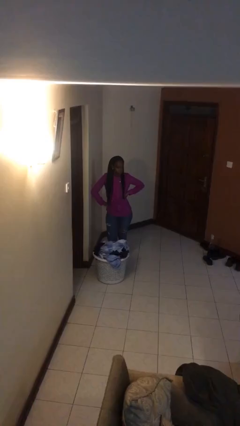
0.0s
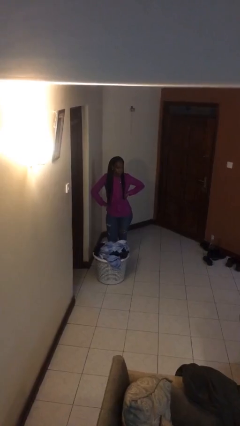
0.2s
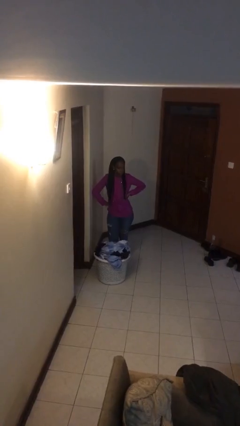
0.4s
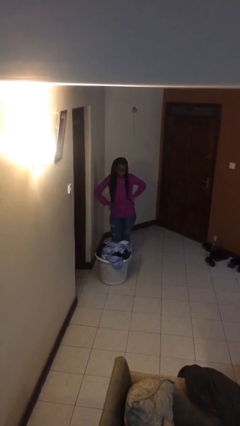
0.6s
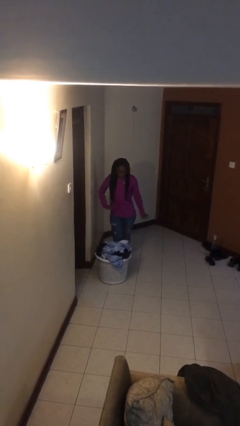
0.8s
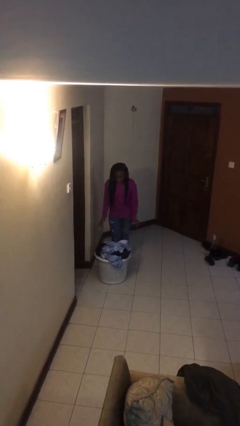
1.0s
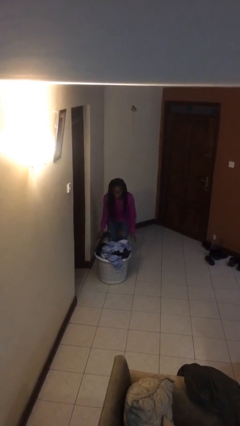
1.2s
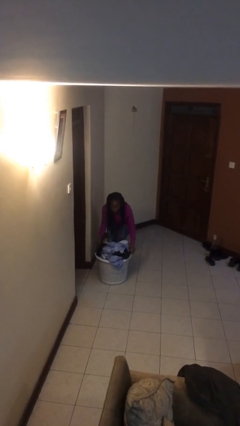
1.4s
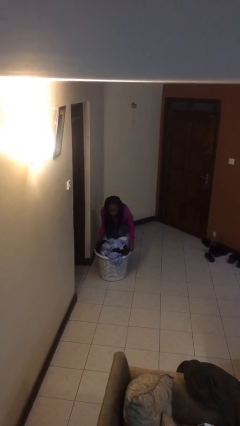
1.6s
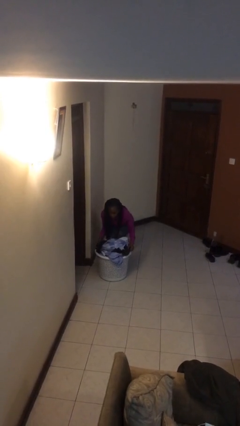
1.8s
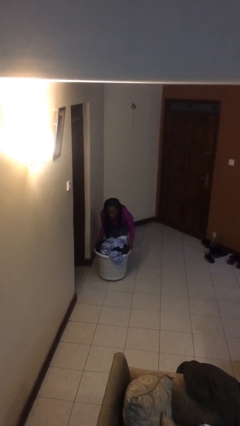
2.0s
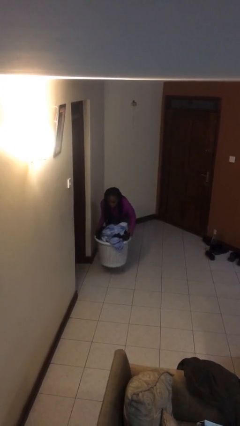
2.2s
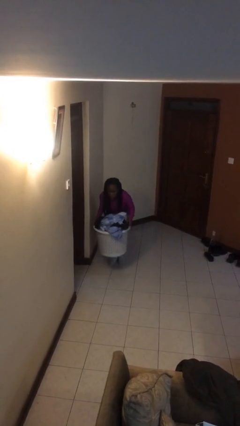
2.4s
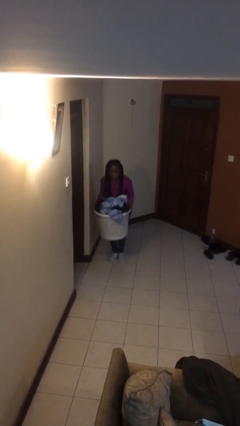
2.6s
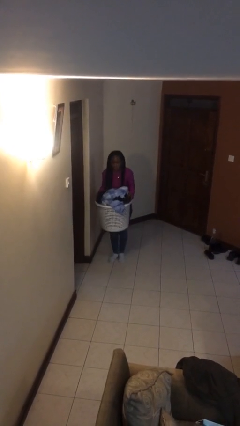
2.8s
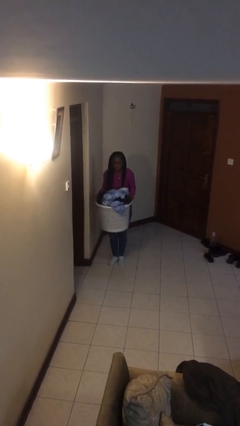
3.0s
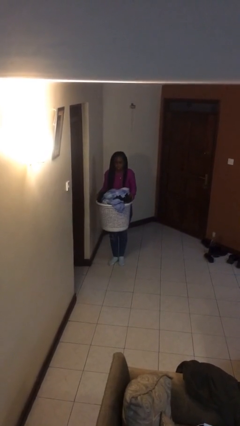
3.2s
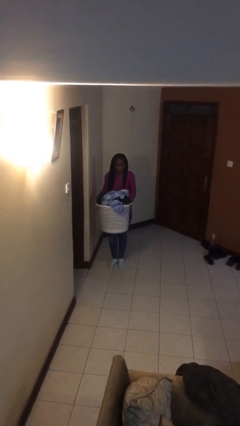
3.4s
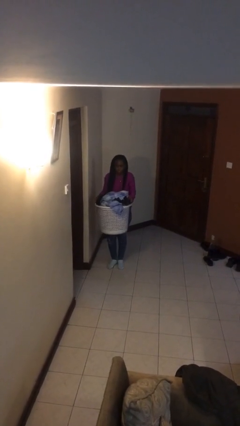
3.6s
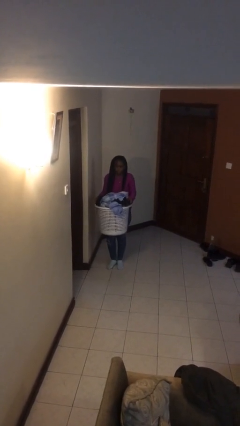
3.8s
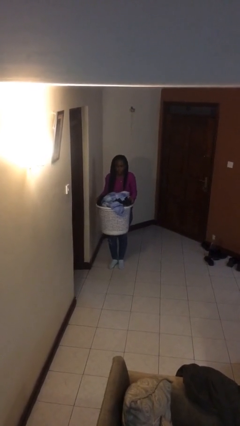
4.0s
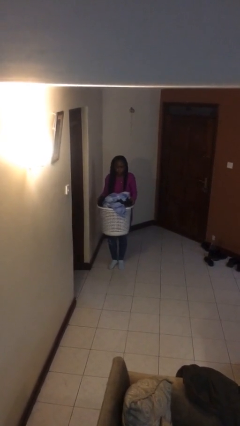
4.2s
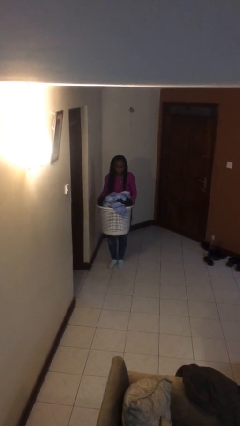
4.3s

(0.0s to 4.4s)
person picks up object from floor

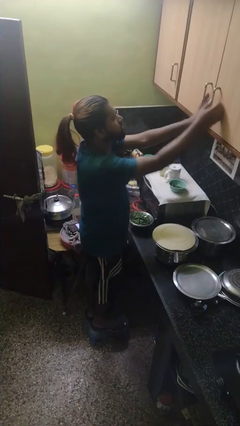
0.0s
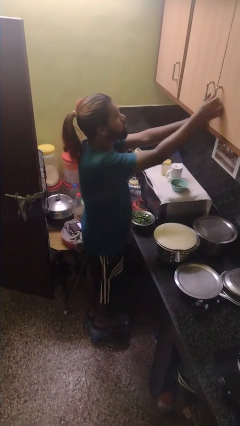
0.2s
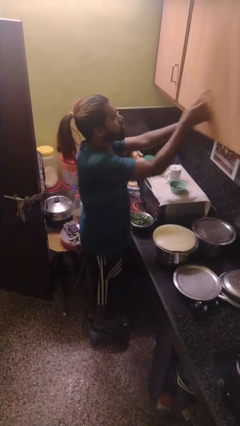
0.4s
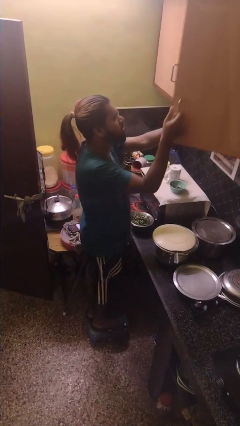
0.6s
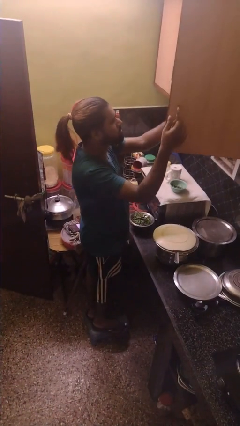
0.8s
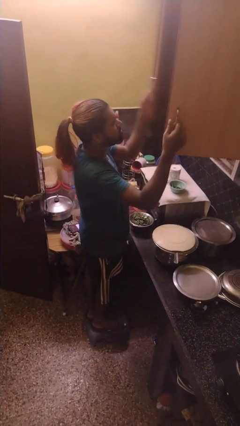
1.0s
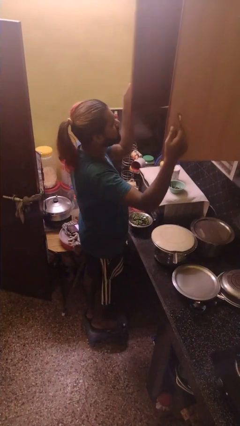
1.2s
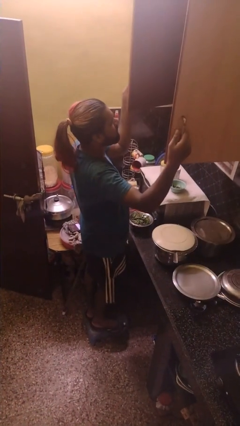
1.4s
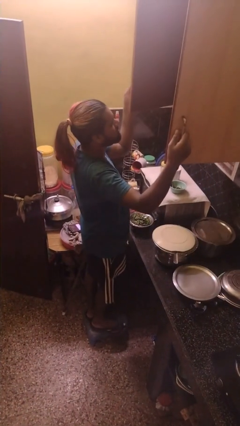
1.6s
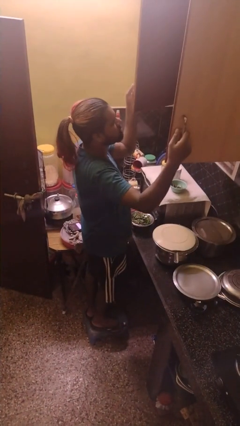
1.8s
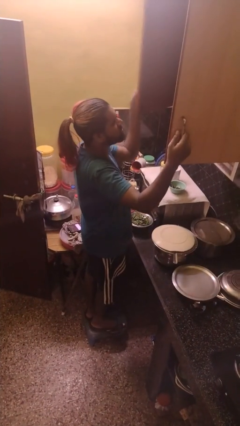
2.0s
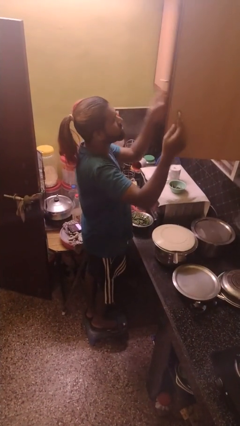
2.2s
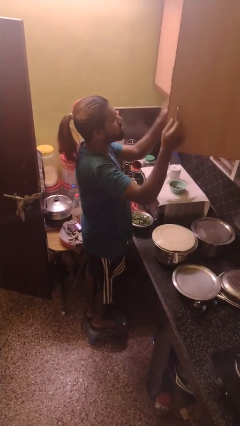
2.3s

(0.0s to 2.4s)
person opens cabinet

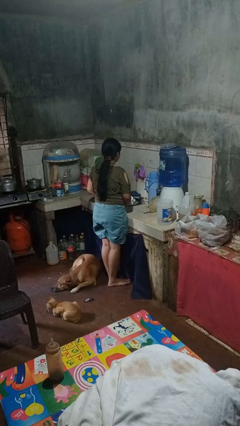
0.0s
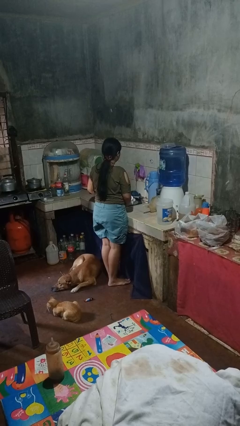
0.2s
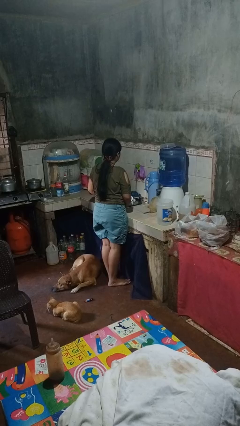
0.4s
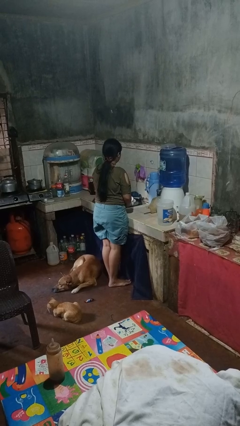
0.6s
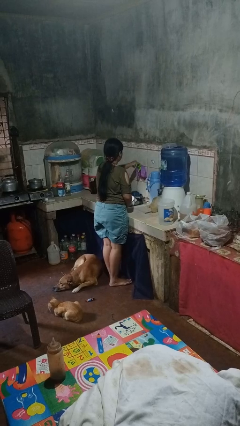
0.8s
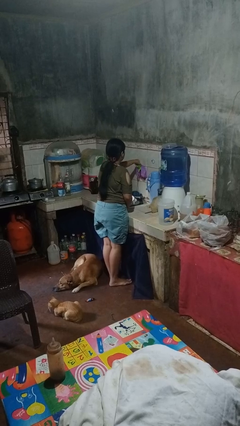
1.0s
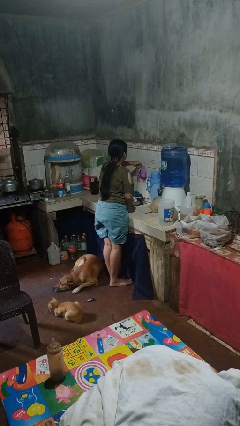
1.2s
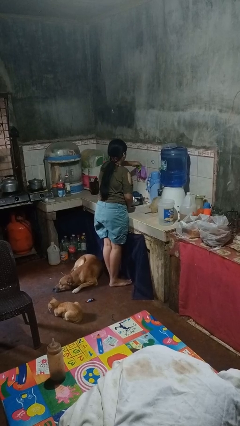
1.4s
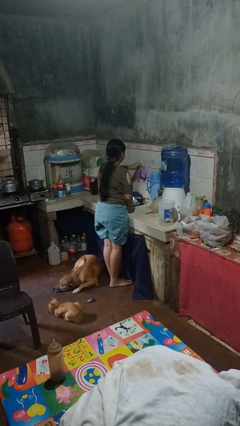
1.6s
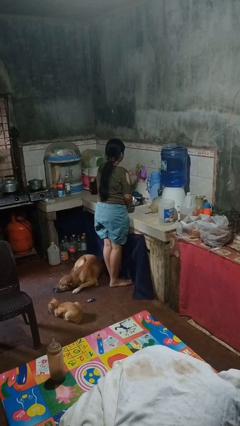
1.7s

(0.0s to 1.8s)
person turns off faucet

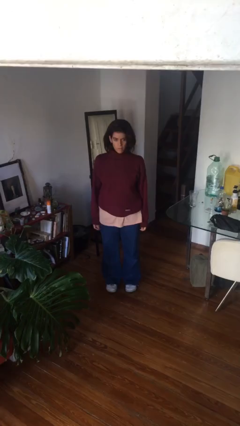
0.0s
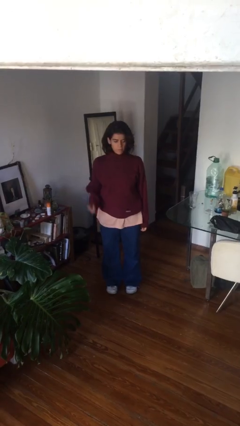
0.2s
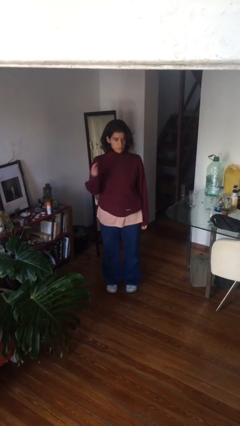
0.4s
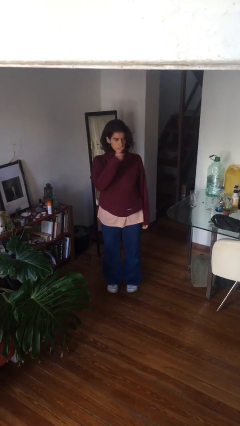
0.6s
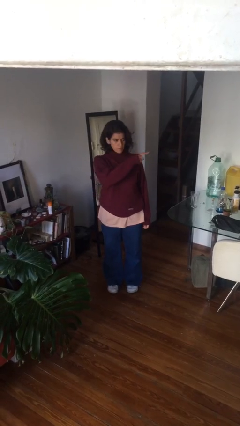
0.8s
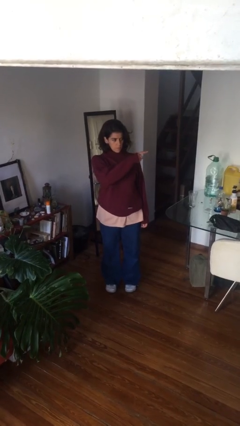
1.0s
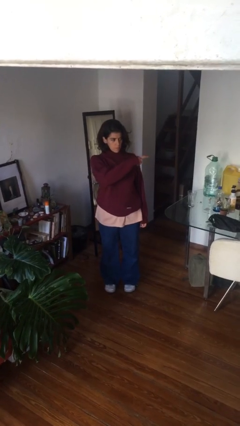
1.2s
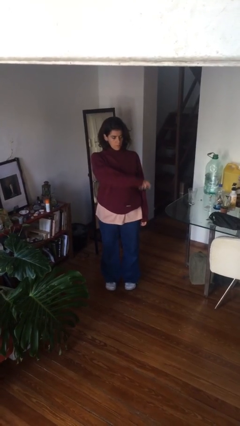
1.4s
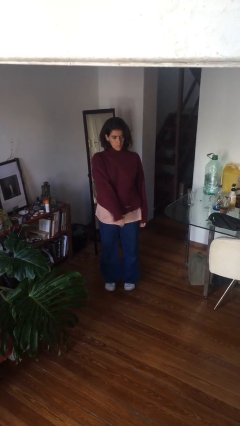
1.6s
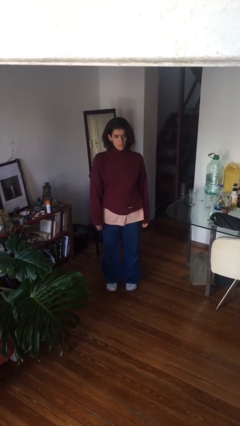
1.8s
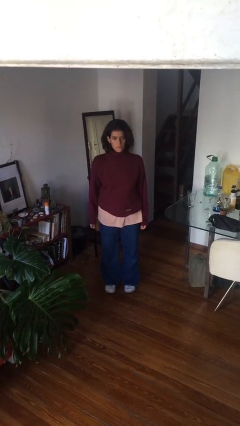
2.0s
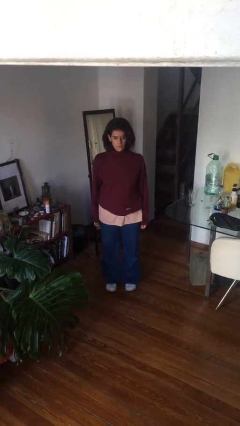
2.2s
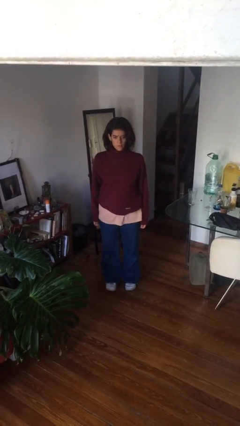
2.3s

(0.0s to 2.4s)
person gestures swipe left

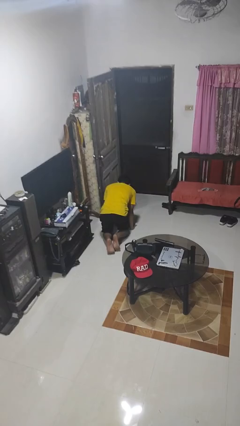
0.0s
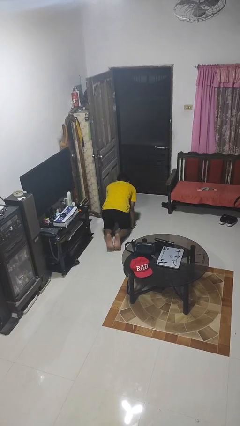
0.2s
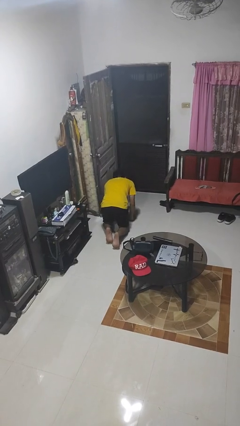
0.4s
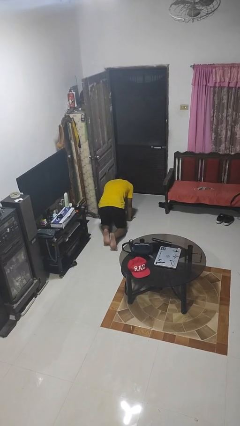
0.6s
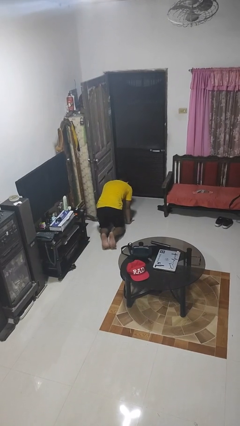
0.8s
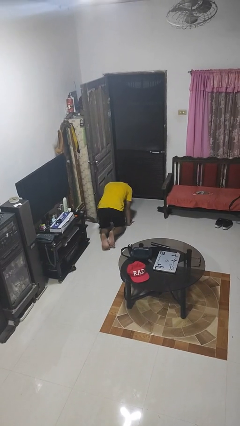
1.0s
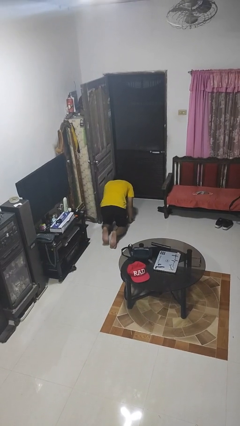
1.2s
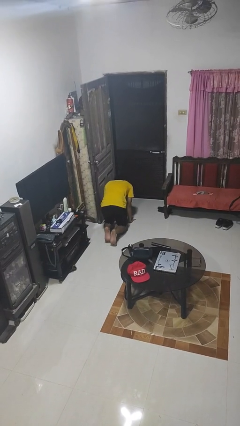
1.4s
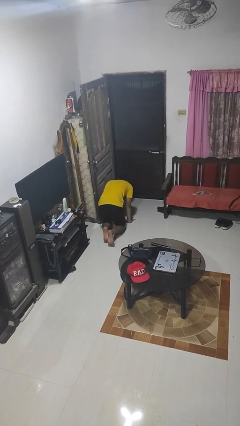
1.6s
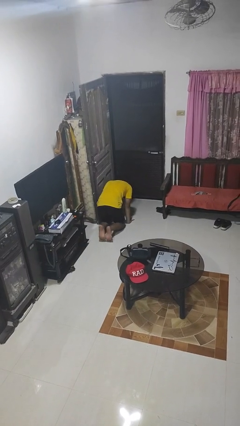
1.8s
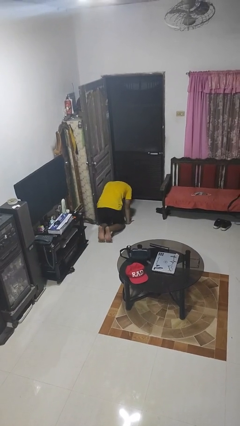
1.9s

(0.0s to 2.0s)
person crawls

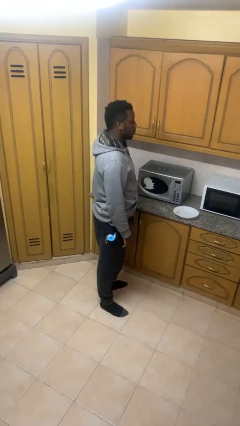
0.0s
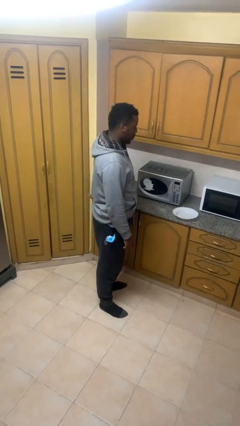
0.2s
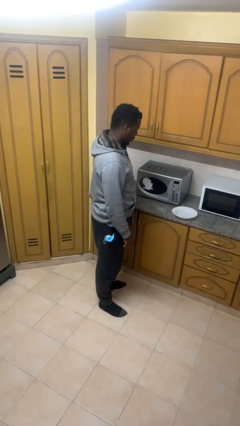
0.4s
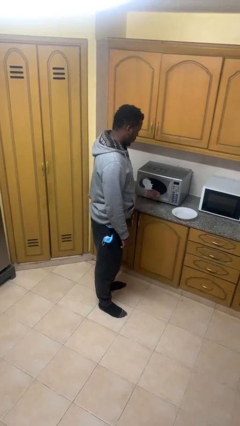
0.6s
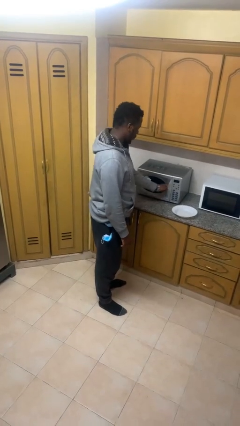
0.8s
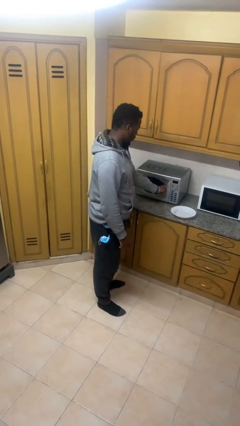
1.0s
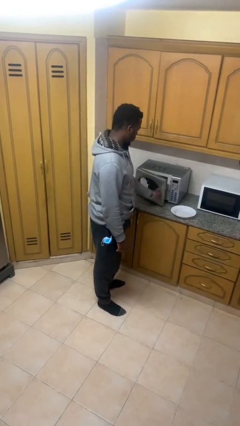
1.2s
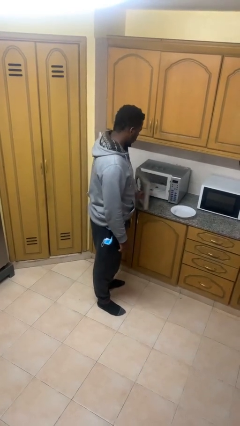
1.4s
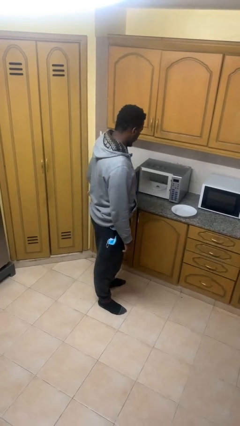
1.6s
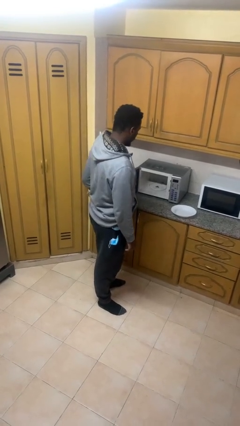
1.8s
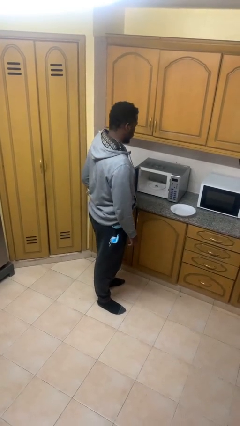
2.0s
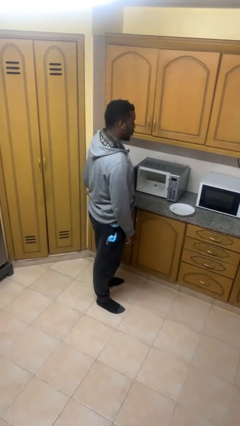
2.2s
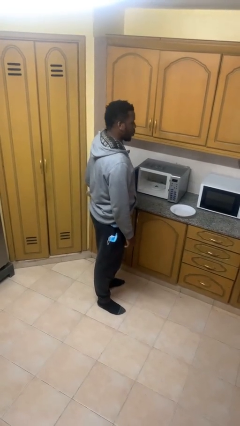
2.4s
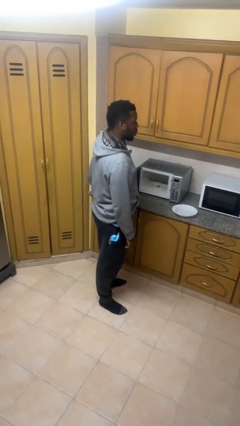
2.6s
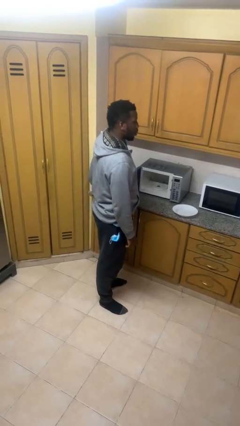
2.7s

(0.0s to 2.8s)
person opens microwave

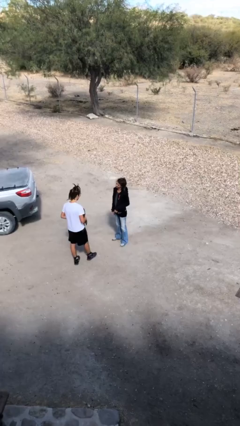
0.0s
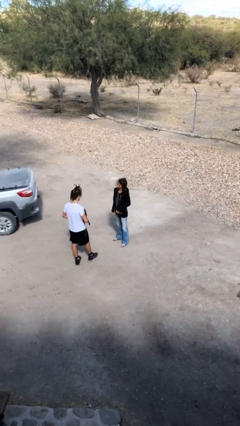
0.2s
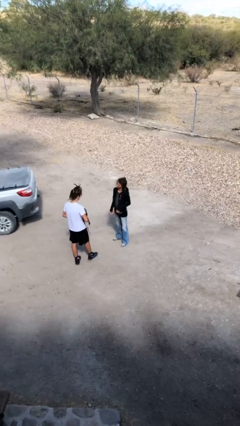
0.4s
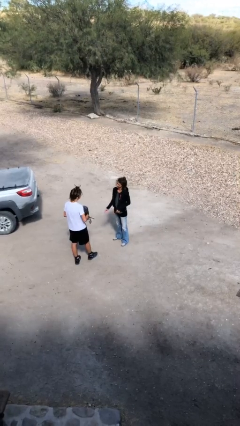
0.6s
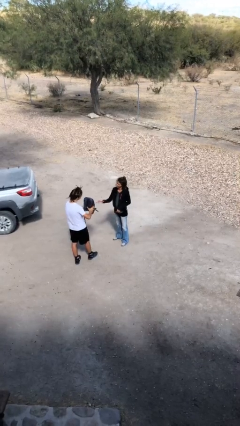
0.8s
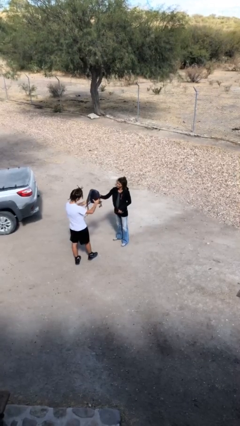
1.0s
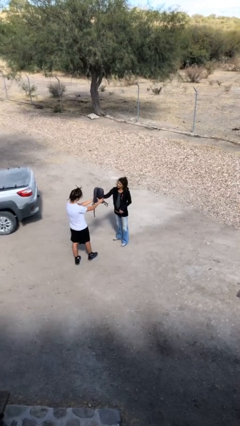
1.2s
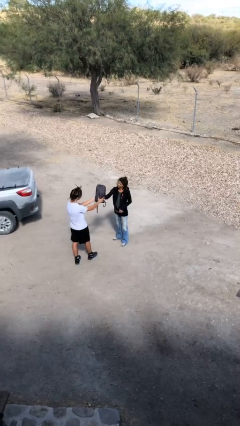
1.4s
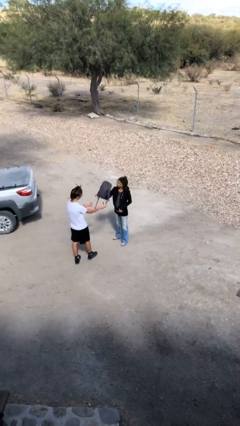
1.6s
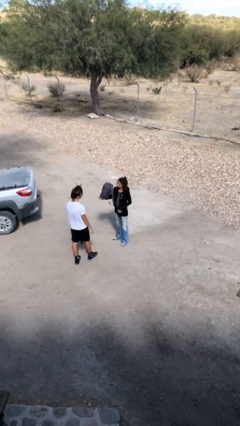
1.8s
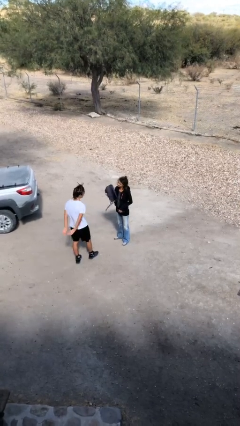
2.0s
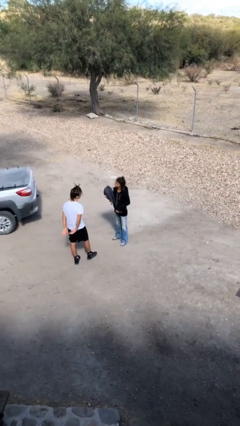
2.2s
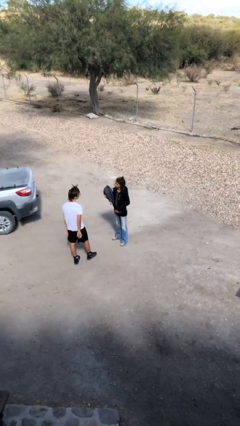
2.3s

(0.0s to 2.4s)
person transfers object to person
